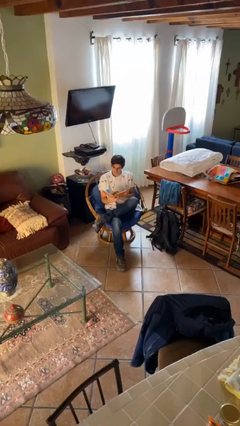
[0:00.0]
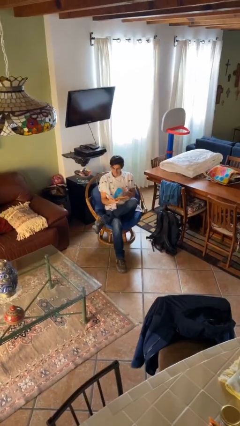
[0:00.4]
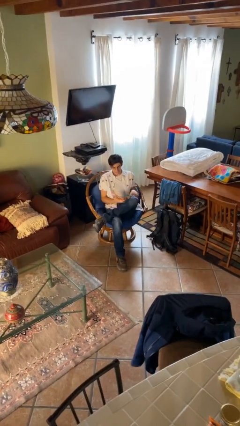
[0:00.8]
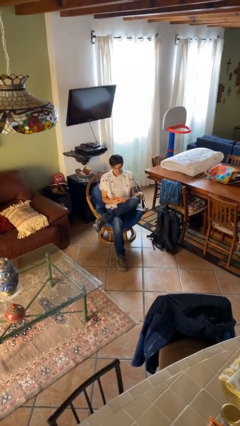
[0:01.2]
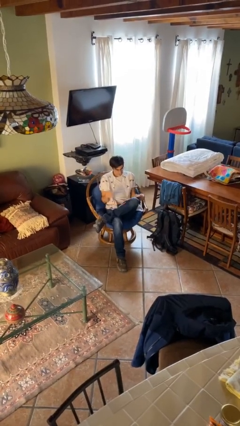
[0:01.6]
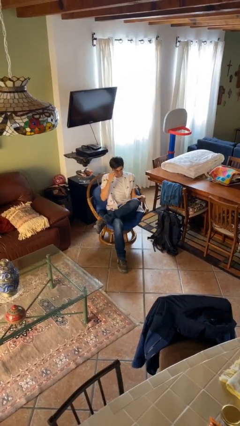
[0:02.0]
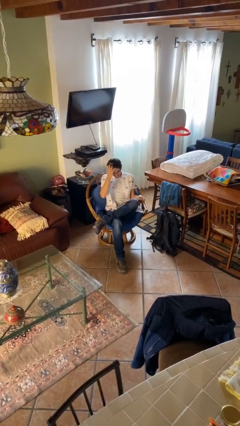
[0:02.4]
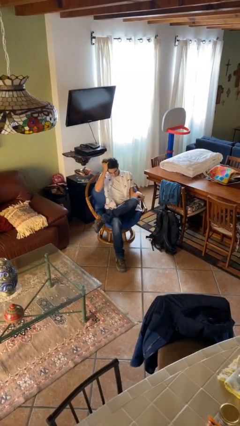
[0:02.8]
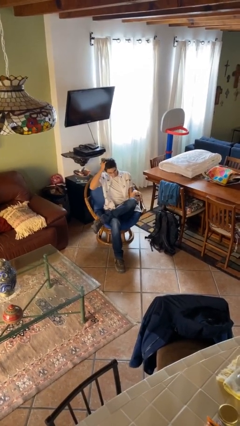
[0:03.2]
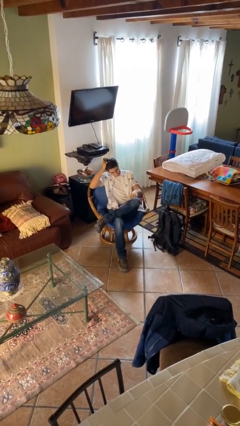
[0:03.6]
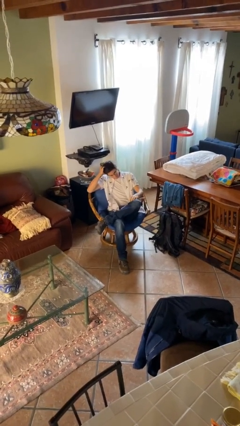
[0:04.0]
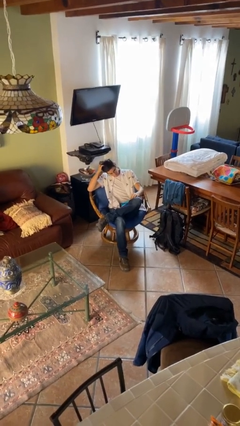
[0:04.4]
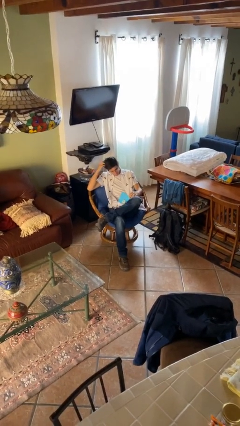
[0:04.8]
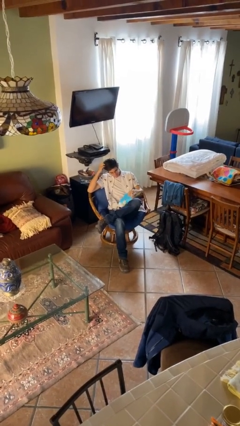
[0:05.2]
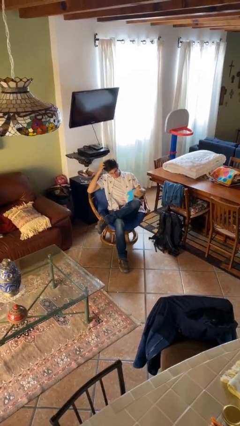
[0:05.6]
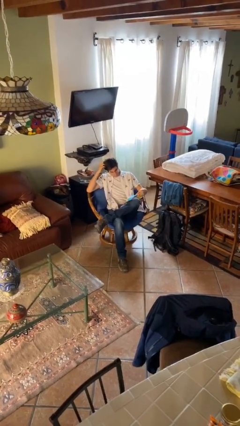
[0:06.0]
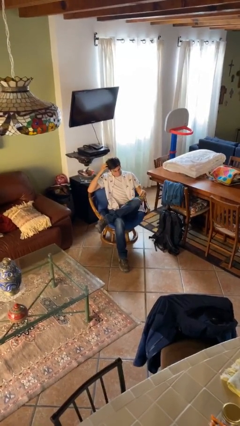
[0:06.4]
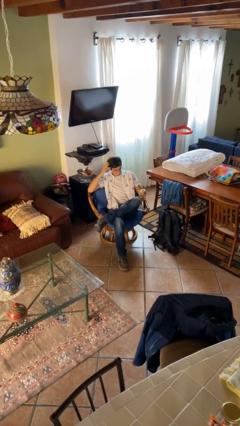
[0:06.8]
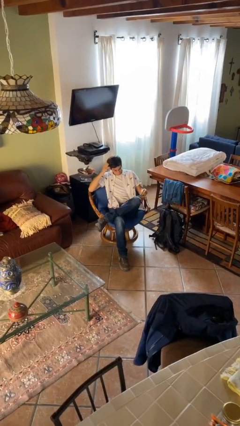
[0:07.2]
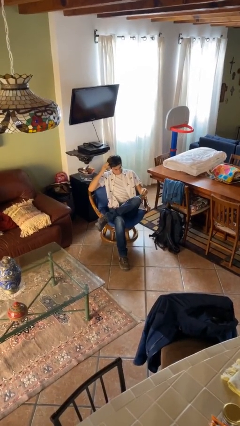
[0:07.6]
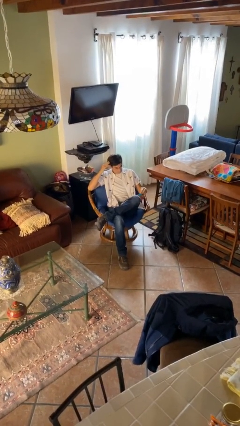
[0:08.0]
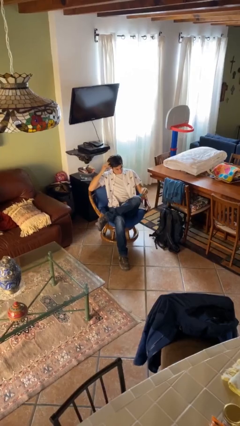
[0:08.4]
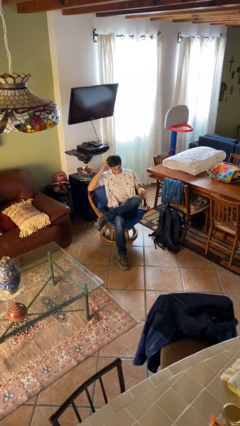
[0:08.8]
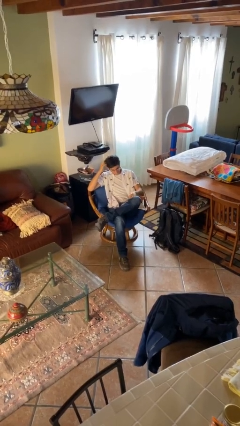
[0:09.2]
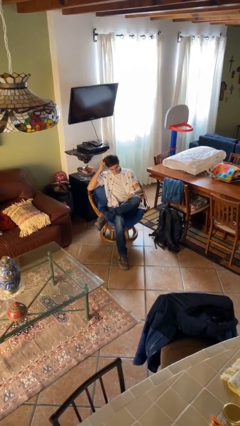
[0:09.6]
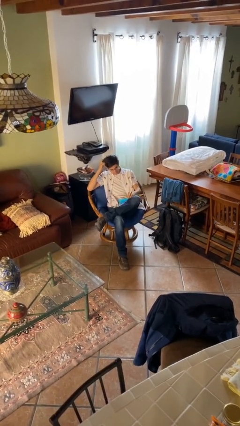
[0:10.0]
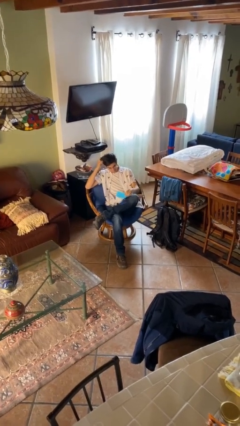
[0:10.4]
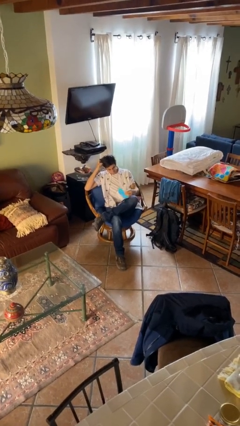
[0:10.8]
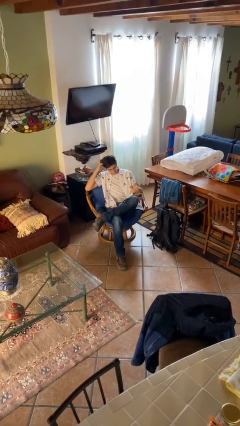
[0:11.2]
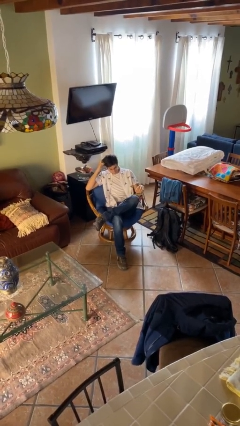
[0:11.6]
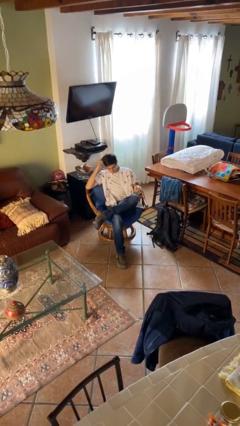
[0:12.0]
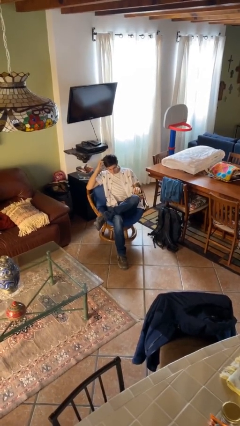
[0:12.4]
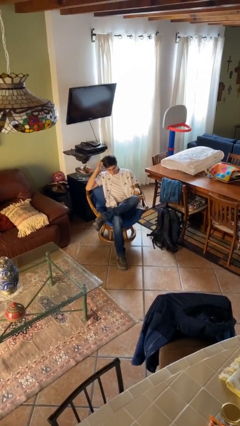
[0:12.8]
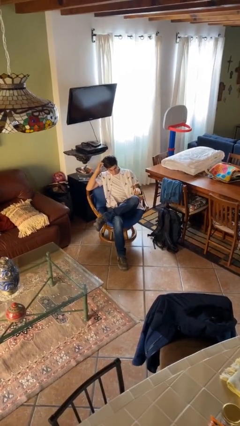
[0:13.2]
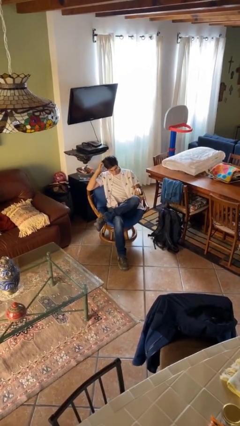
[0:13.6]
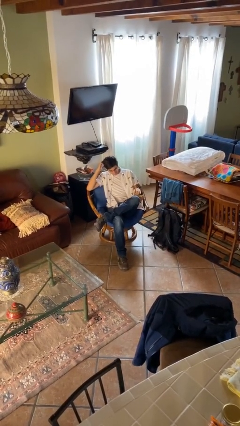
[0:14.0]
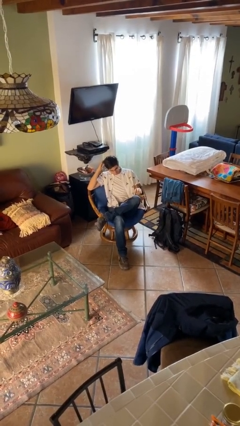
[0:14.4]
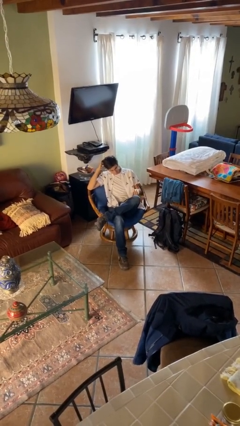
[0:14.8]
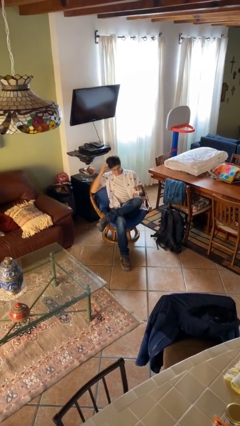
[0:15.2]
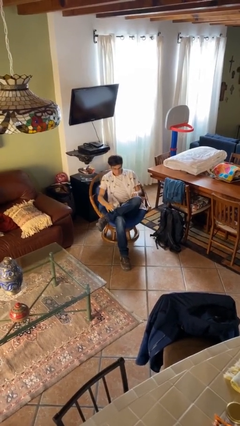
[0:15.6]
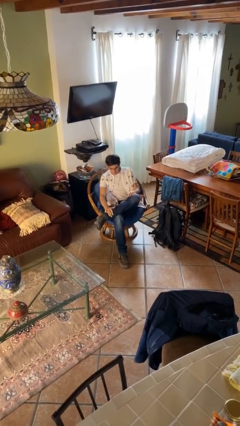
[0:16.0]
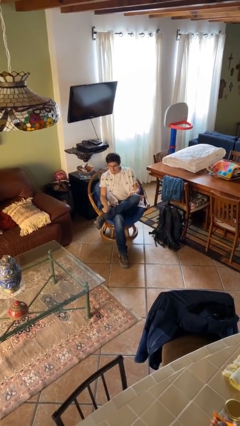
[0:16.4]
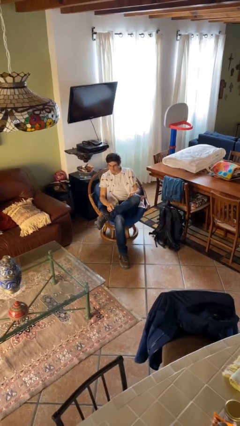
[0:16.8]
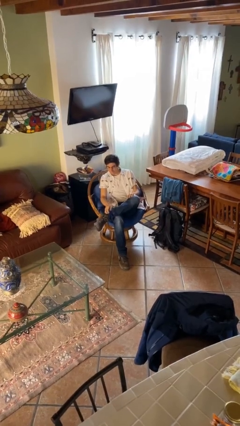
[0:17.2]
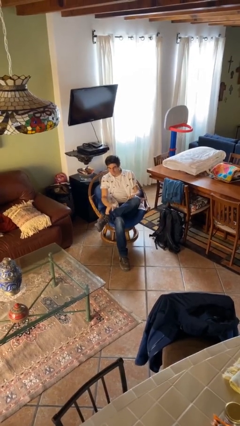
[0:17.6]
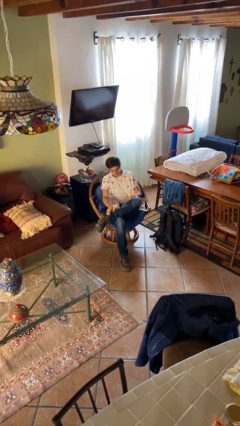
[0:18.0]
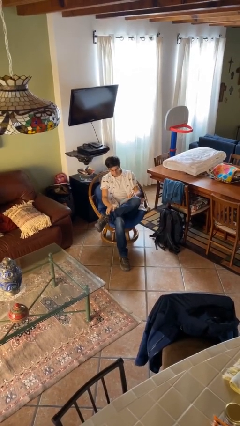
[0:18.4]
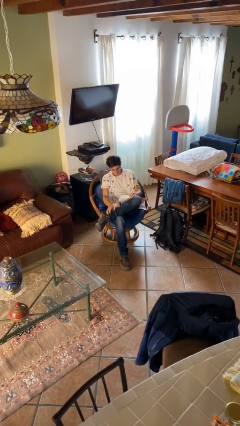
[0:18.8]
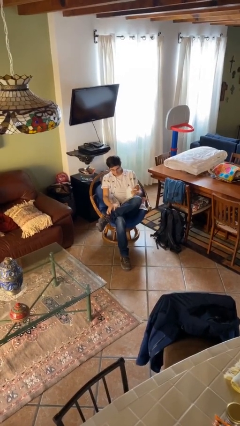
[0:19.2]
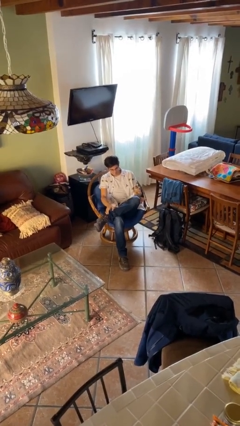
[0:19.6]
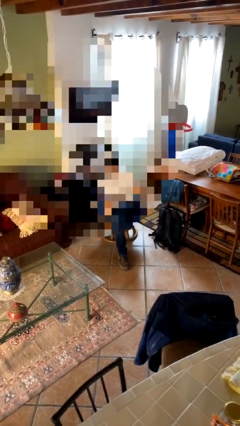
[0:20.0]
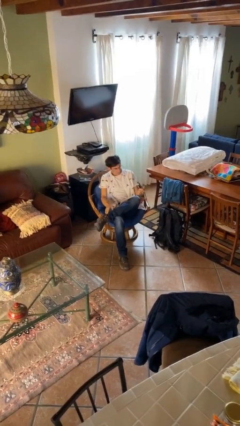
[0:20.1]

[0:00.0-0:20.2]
person reads document

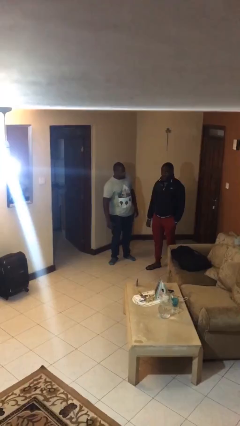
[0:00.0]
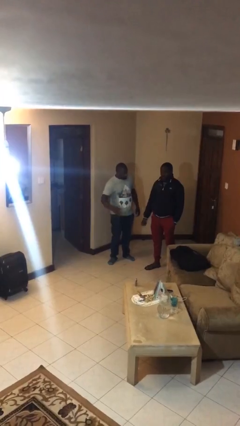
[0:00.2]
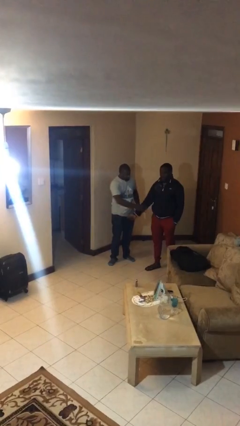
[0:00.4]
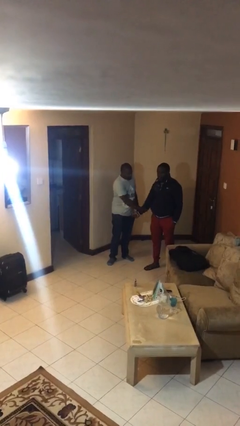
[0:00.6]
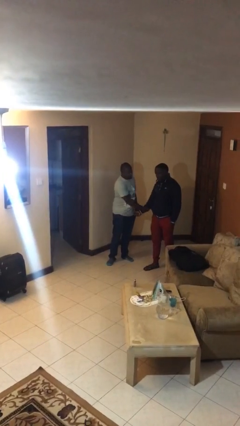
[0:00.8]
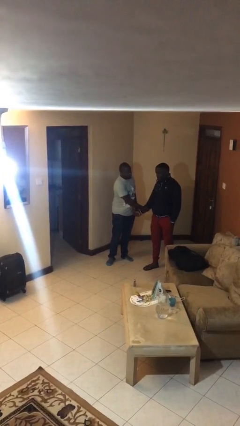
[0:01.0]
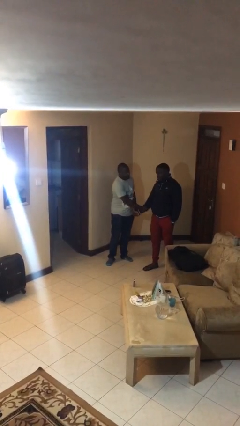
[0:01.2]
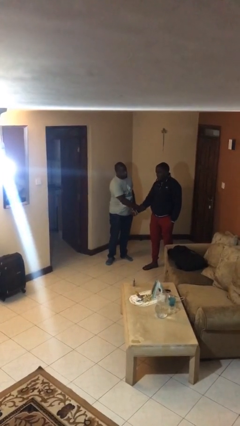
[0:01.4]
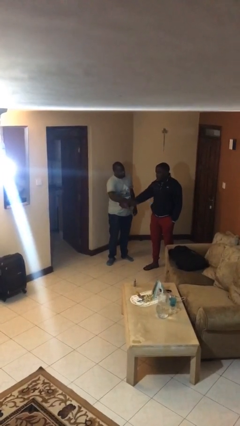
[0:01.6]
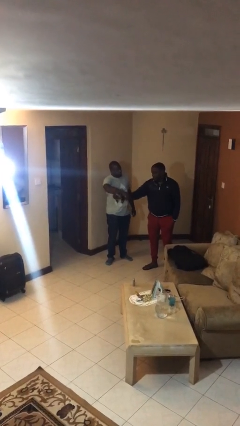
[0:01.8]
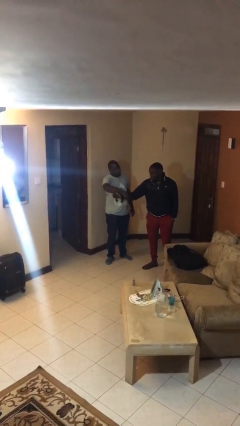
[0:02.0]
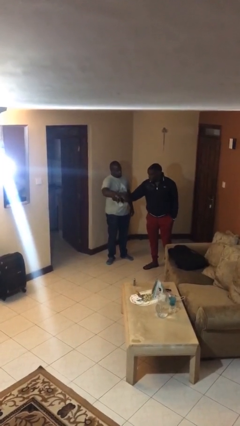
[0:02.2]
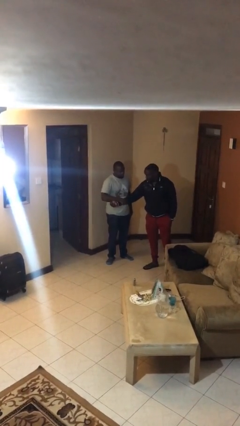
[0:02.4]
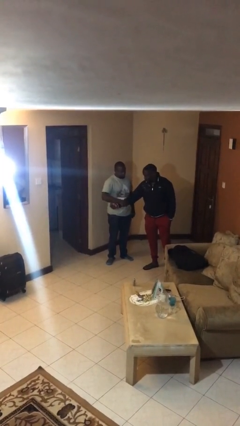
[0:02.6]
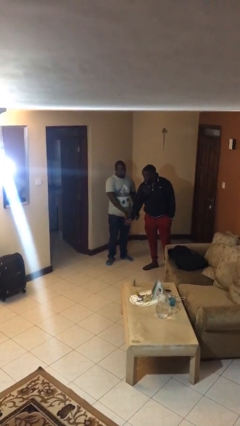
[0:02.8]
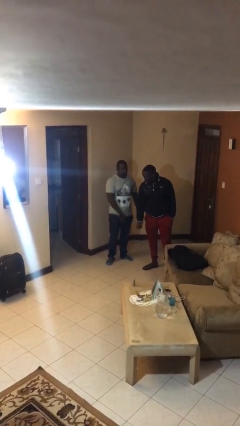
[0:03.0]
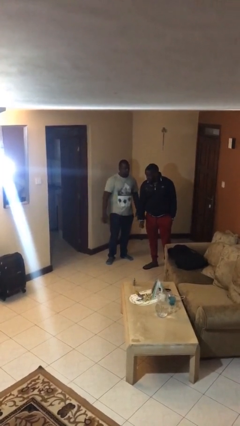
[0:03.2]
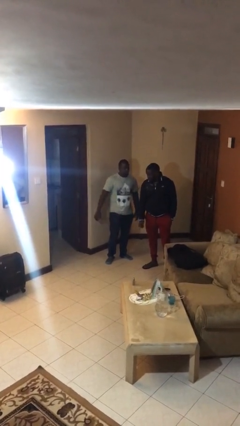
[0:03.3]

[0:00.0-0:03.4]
person grabs person by forearm

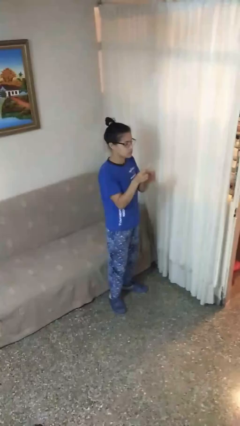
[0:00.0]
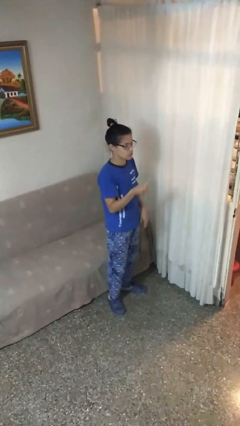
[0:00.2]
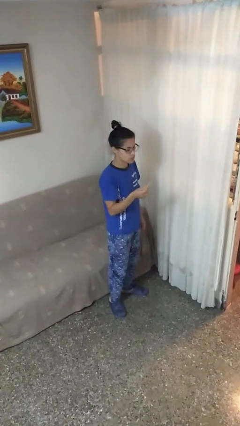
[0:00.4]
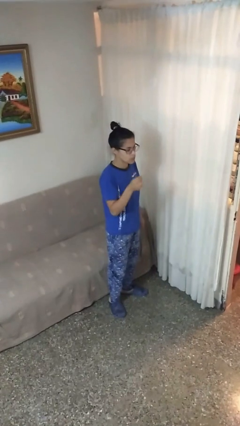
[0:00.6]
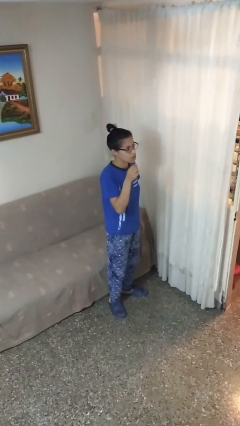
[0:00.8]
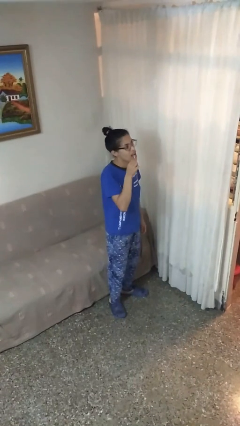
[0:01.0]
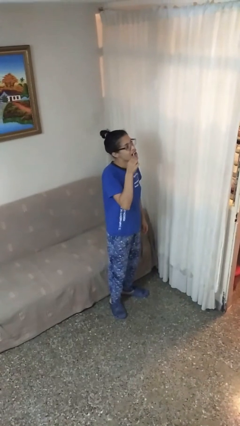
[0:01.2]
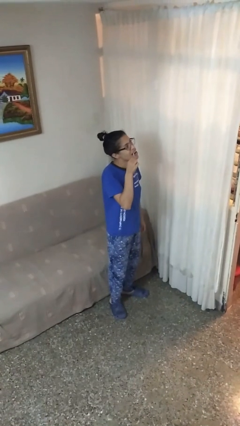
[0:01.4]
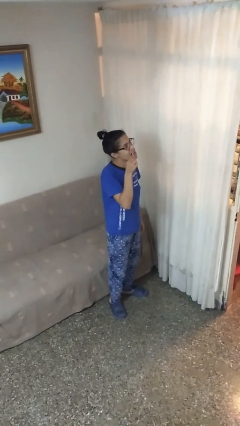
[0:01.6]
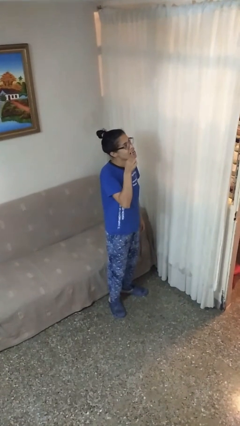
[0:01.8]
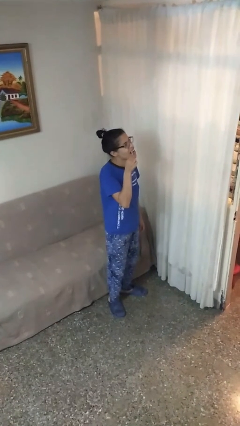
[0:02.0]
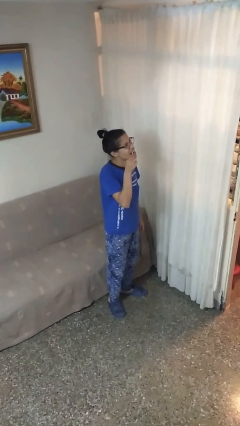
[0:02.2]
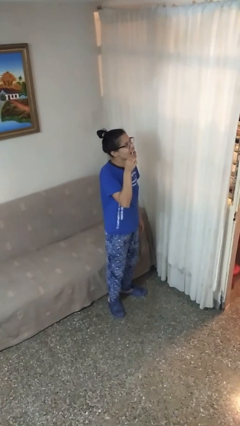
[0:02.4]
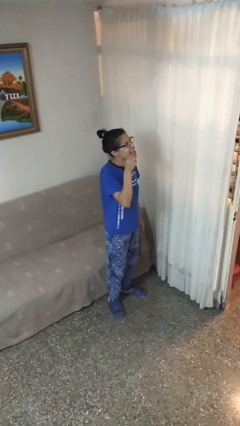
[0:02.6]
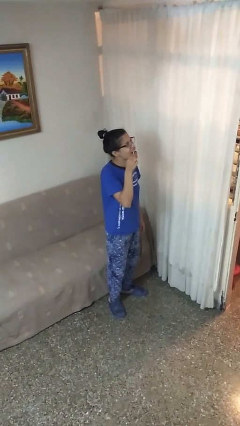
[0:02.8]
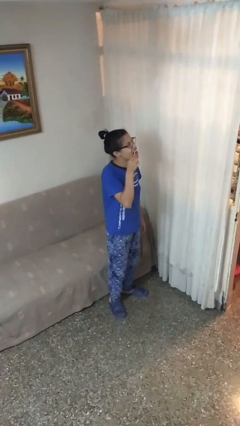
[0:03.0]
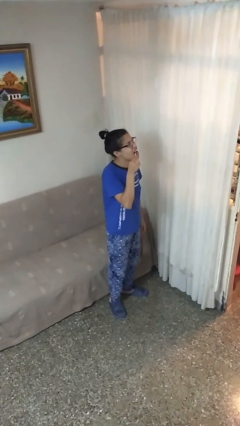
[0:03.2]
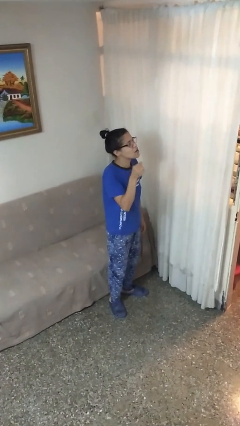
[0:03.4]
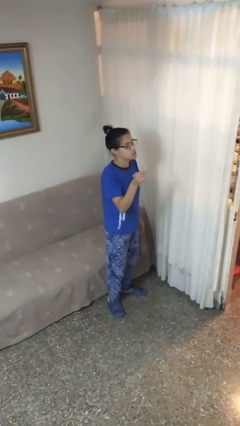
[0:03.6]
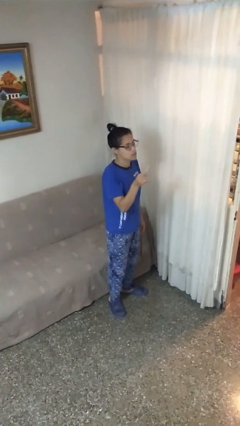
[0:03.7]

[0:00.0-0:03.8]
person flosses

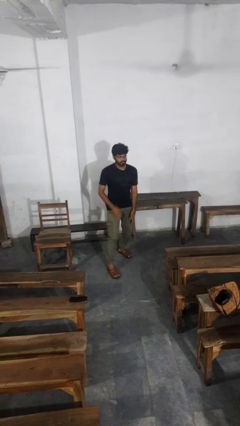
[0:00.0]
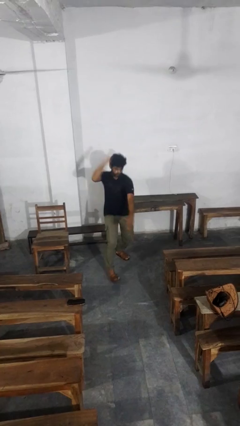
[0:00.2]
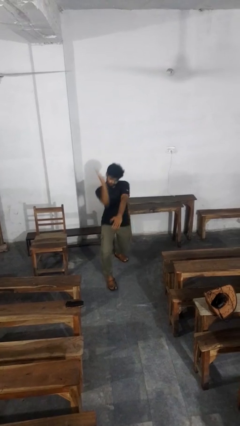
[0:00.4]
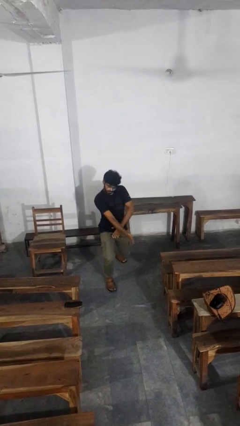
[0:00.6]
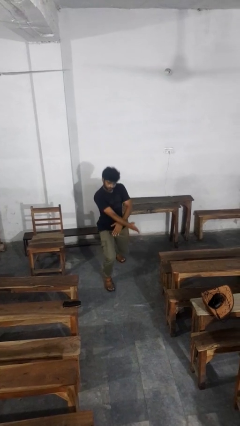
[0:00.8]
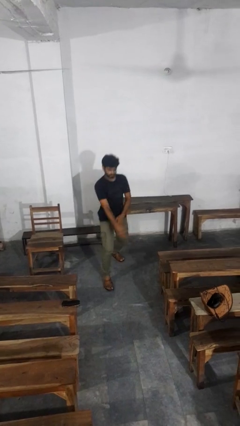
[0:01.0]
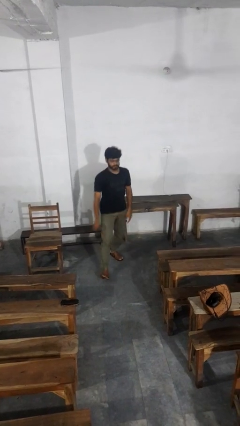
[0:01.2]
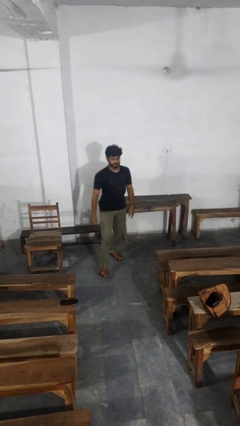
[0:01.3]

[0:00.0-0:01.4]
person karate chop
